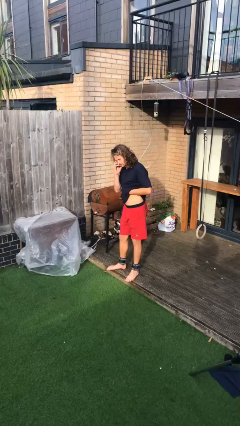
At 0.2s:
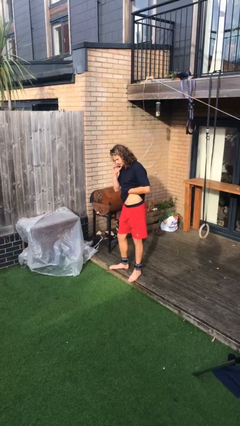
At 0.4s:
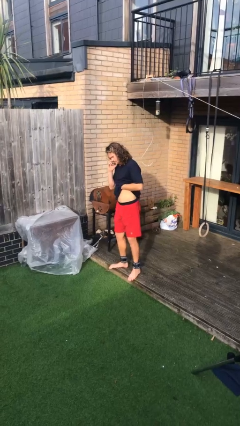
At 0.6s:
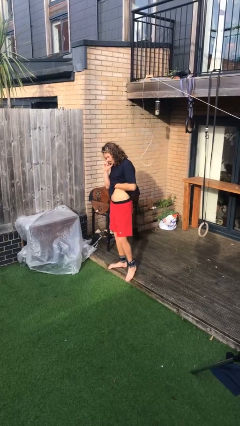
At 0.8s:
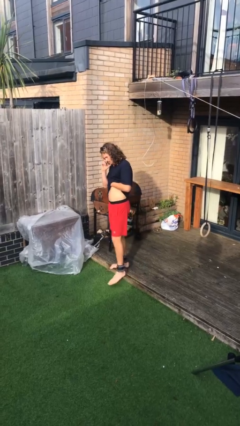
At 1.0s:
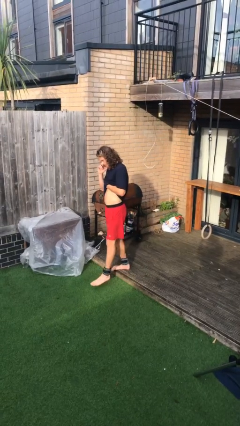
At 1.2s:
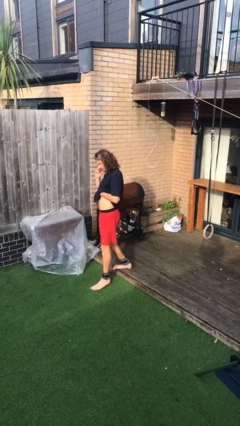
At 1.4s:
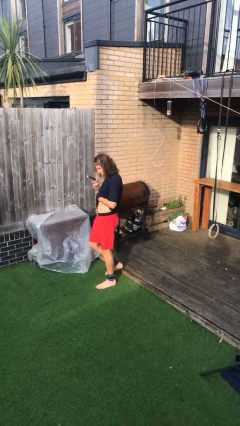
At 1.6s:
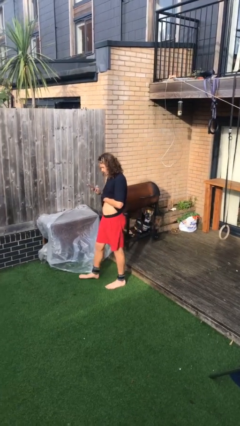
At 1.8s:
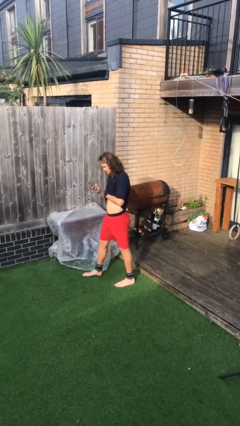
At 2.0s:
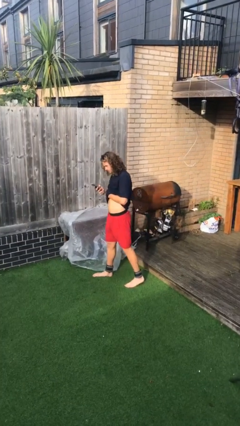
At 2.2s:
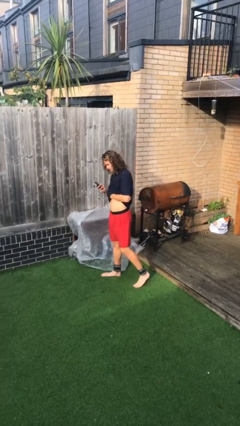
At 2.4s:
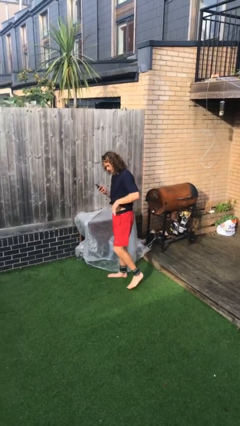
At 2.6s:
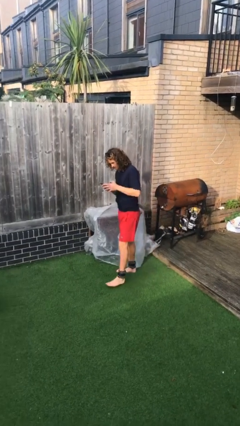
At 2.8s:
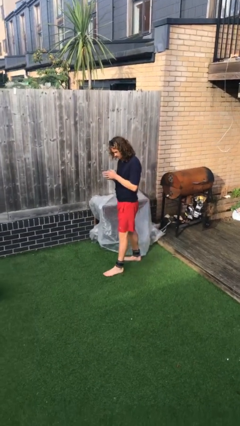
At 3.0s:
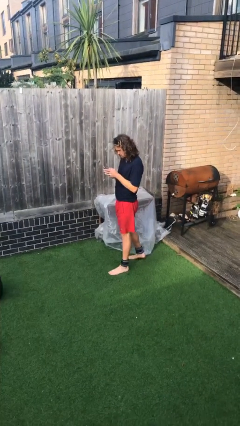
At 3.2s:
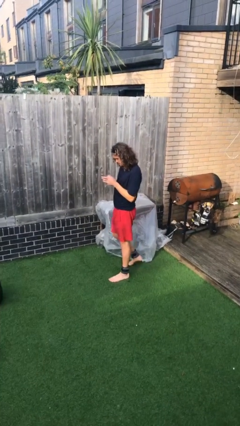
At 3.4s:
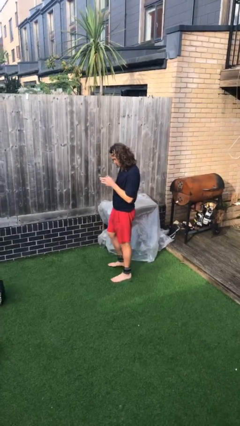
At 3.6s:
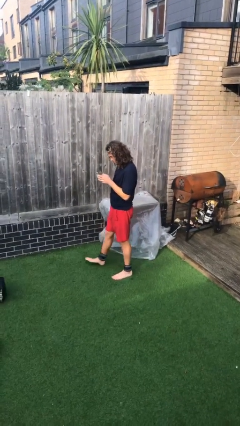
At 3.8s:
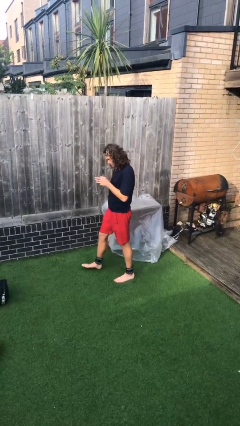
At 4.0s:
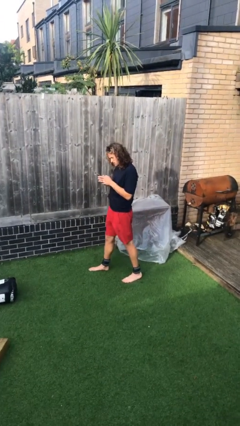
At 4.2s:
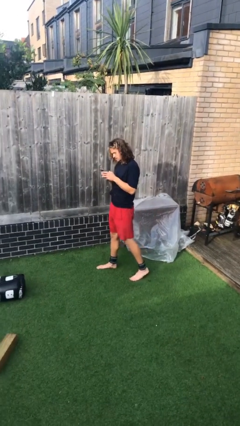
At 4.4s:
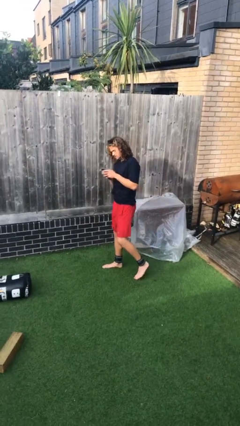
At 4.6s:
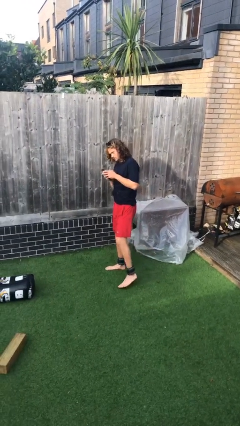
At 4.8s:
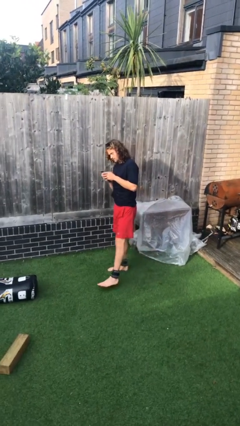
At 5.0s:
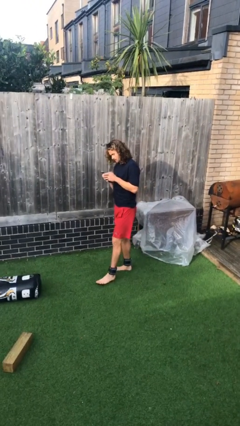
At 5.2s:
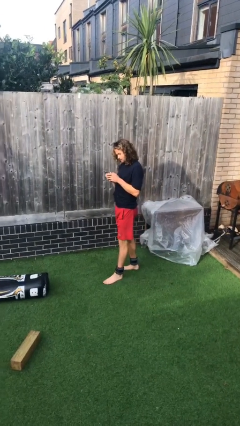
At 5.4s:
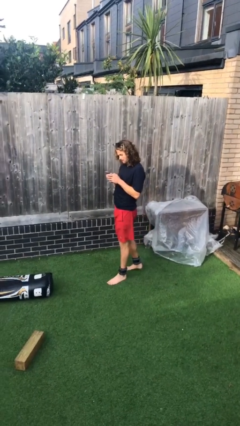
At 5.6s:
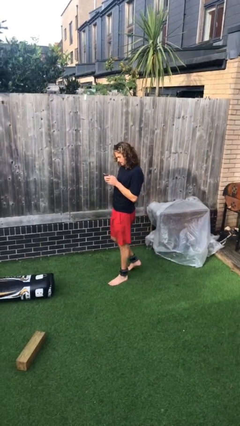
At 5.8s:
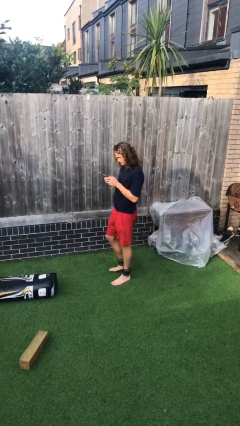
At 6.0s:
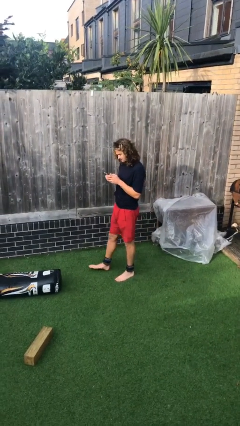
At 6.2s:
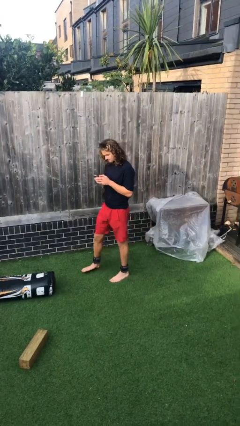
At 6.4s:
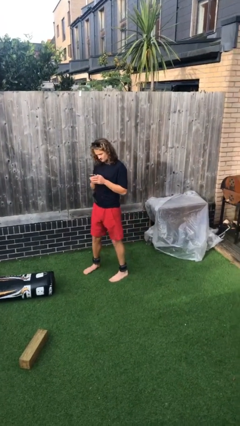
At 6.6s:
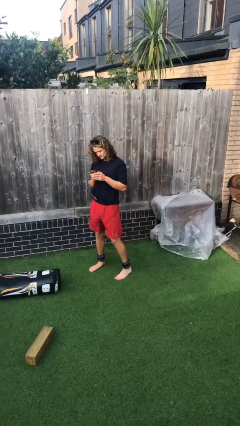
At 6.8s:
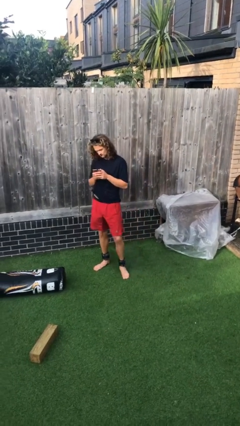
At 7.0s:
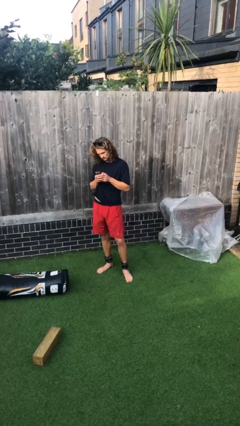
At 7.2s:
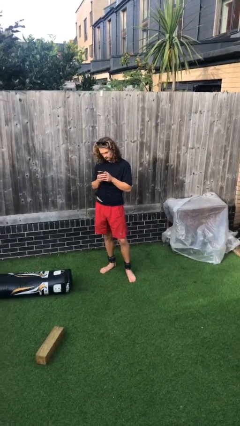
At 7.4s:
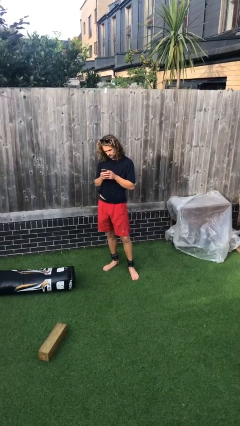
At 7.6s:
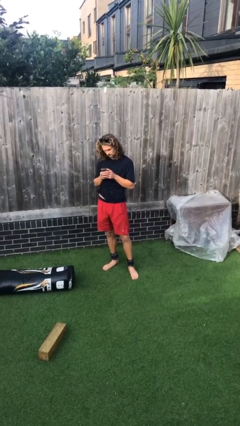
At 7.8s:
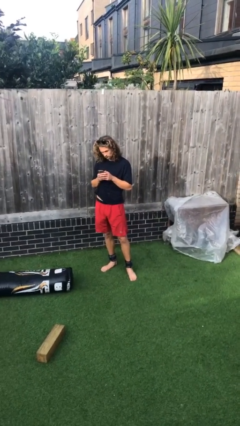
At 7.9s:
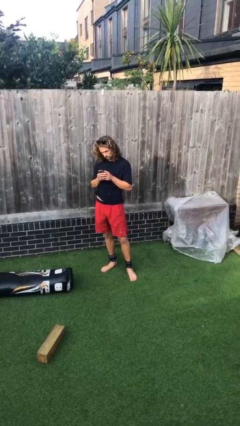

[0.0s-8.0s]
person texts on phone

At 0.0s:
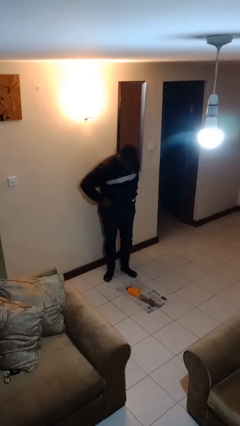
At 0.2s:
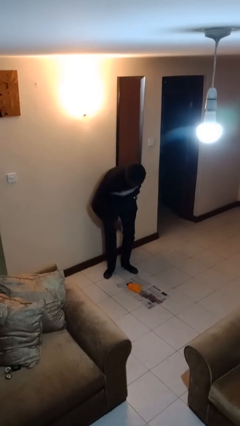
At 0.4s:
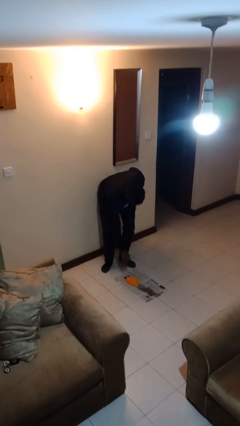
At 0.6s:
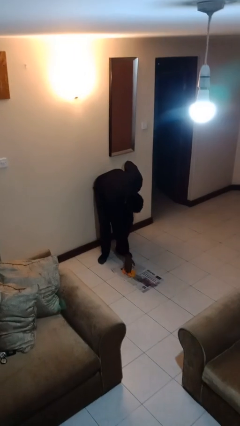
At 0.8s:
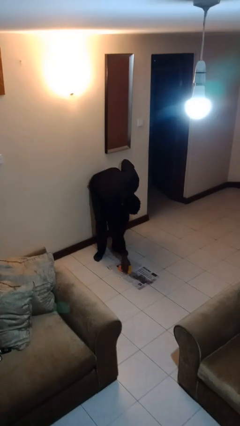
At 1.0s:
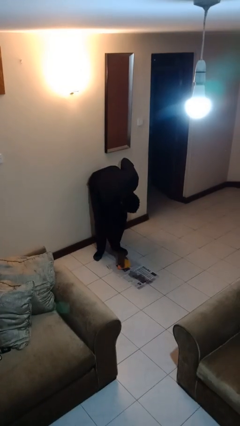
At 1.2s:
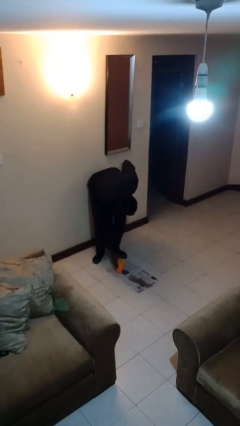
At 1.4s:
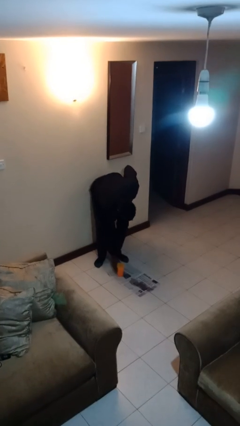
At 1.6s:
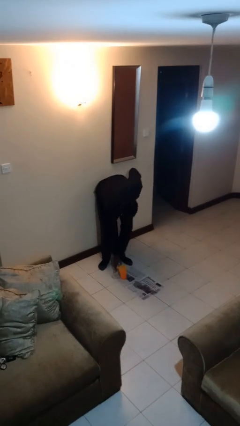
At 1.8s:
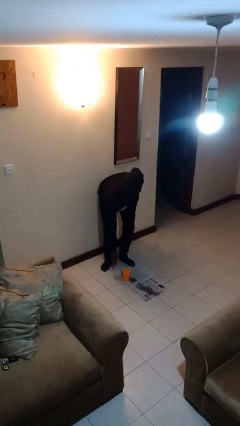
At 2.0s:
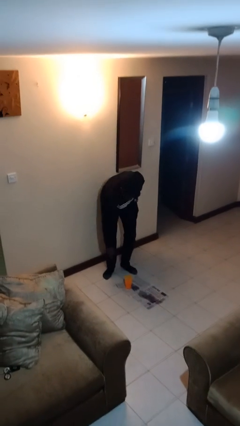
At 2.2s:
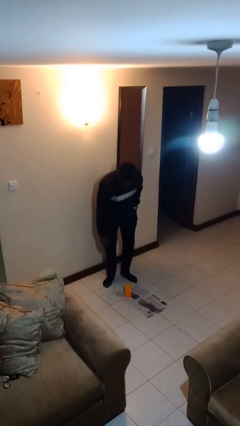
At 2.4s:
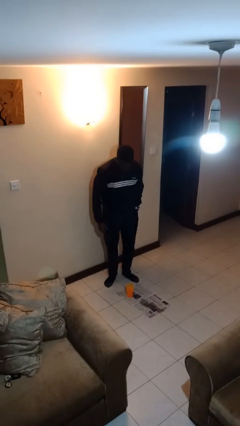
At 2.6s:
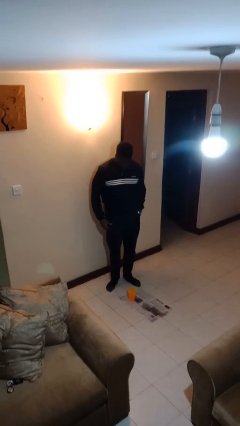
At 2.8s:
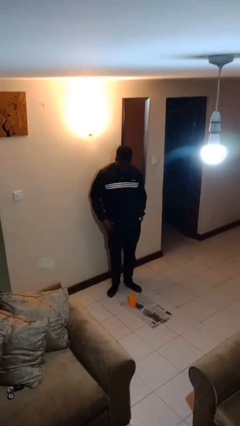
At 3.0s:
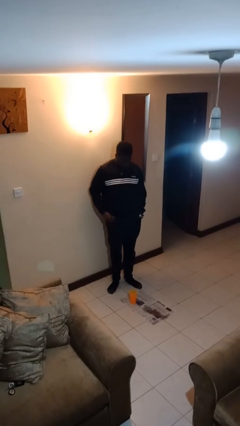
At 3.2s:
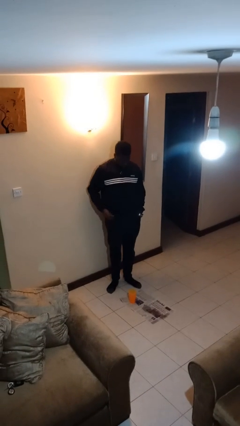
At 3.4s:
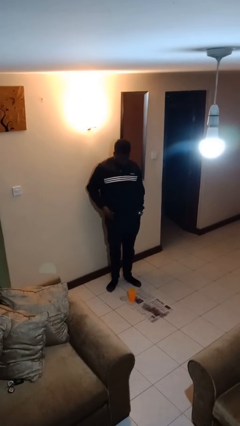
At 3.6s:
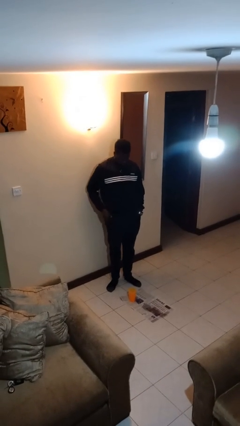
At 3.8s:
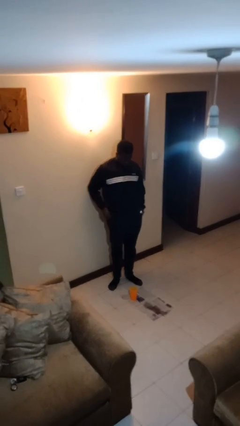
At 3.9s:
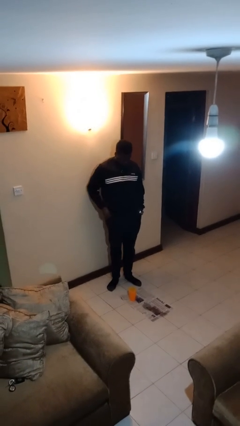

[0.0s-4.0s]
person sets upright glass

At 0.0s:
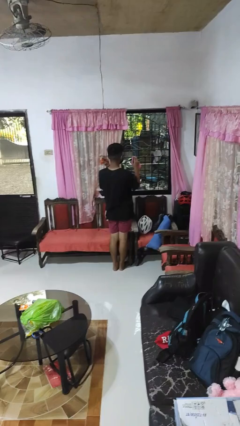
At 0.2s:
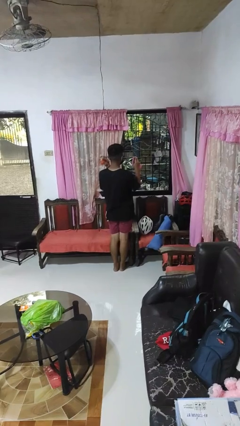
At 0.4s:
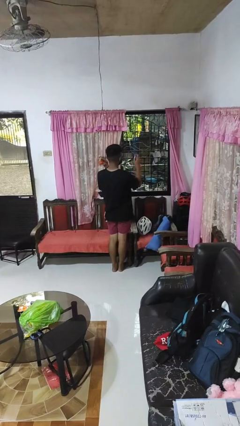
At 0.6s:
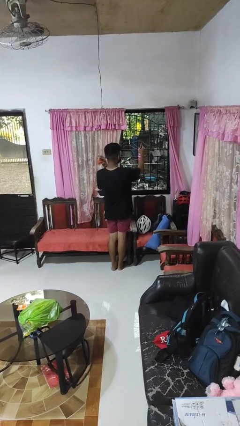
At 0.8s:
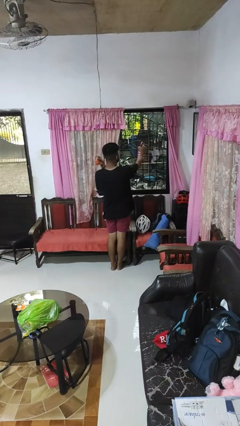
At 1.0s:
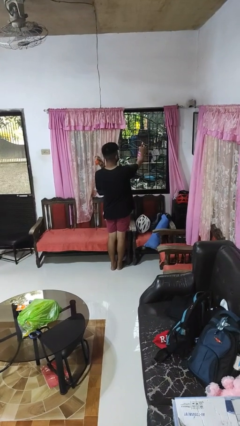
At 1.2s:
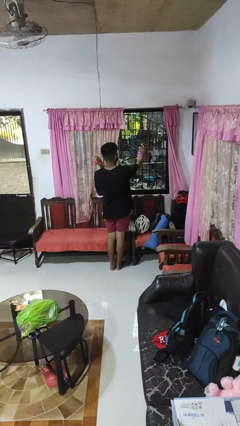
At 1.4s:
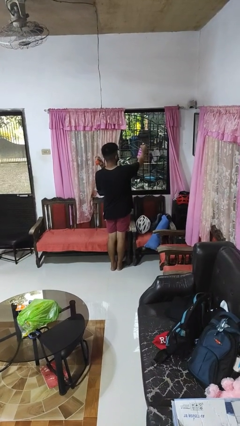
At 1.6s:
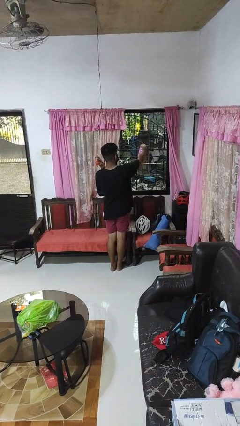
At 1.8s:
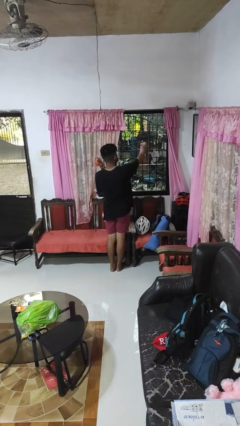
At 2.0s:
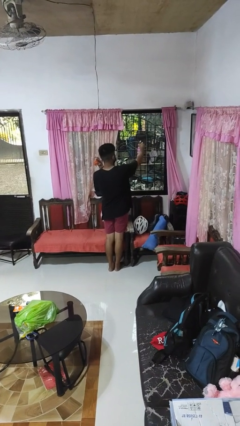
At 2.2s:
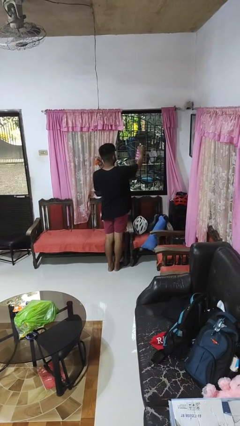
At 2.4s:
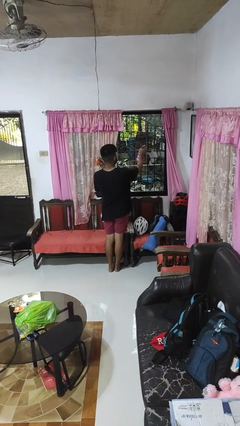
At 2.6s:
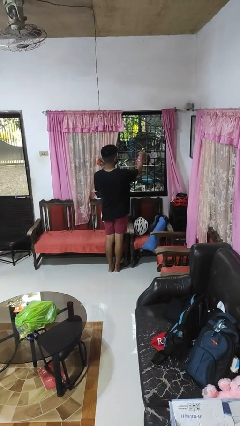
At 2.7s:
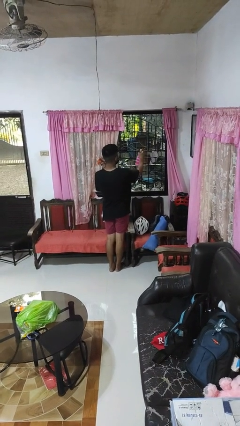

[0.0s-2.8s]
person sprays from bottle

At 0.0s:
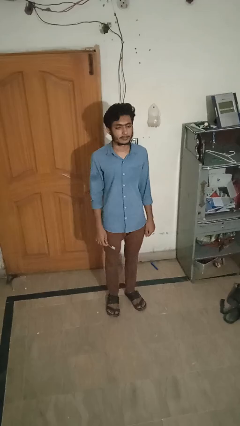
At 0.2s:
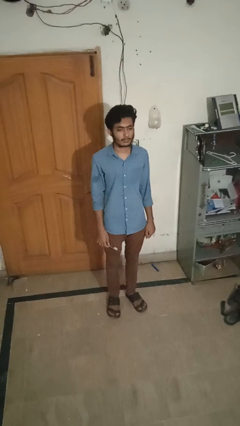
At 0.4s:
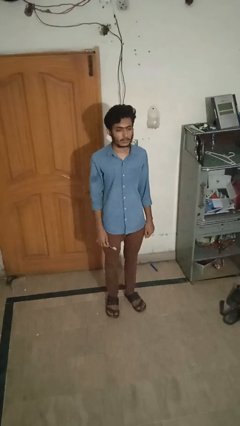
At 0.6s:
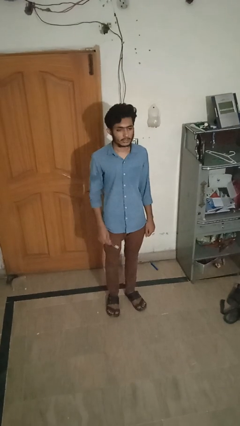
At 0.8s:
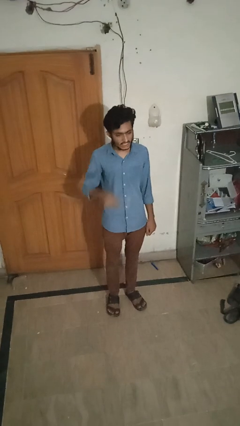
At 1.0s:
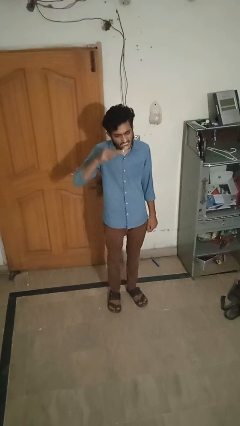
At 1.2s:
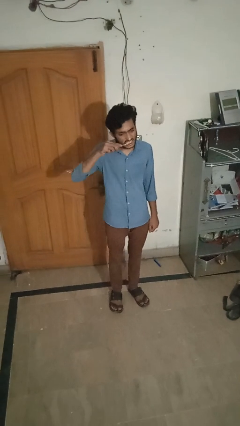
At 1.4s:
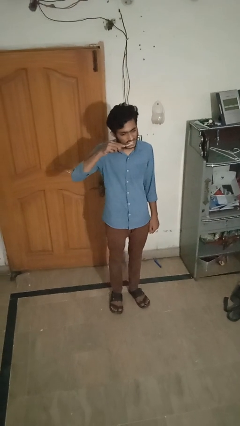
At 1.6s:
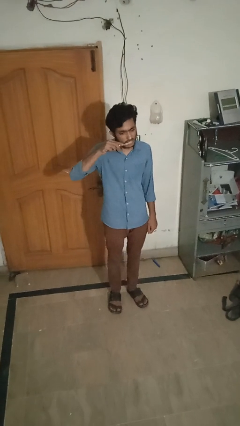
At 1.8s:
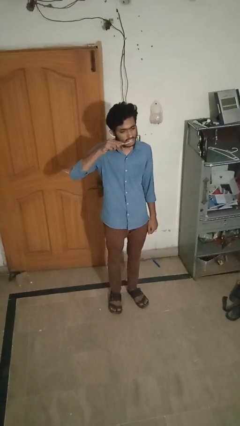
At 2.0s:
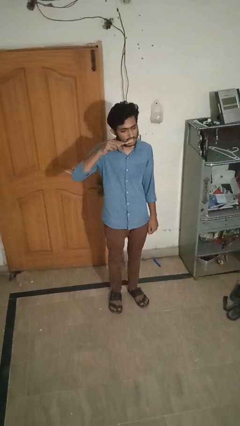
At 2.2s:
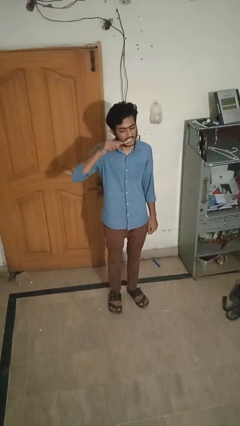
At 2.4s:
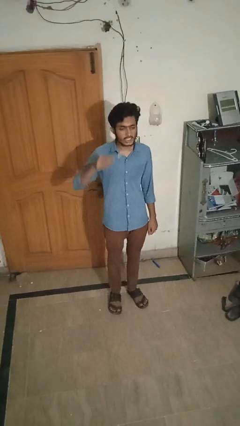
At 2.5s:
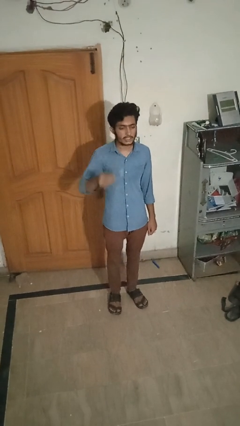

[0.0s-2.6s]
person brushes teeth

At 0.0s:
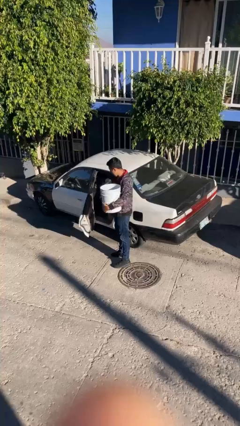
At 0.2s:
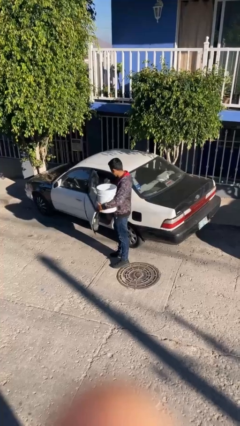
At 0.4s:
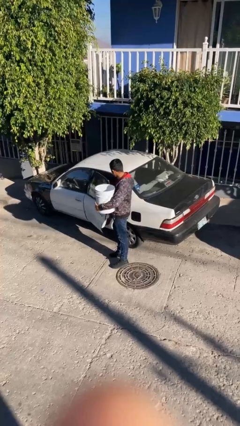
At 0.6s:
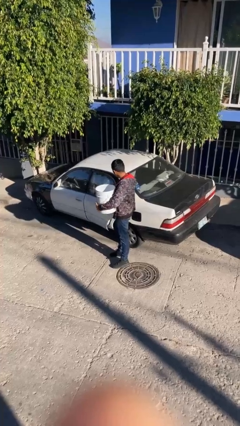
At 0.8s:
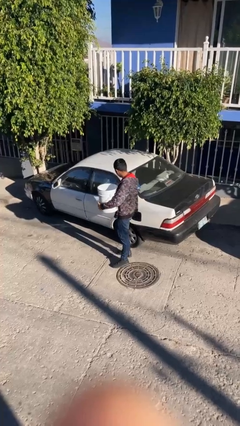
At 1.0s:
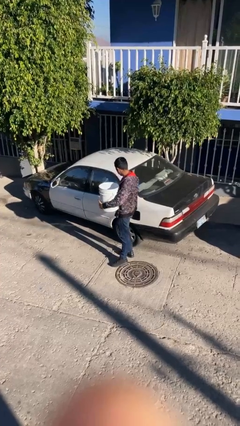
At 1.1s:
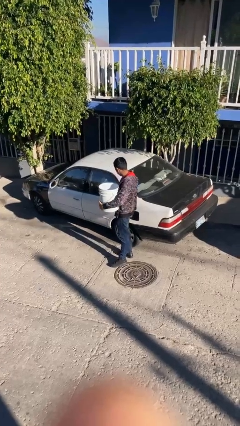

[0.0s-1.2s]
person closes car door
